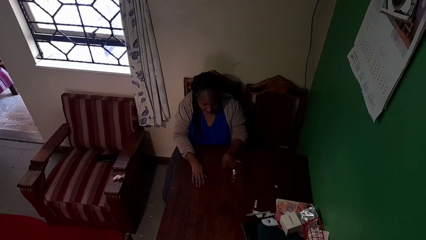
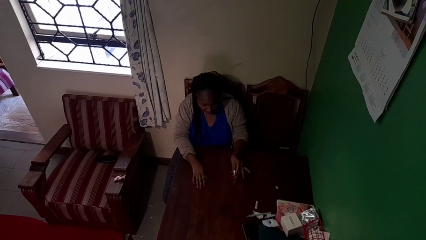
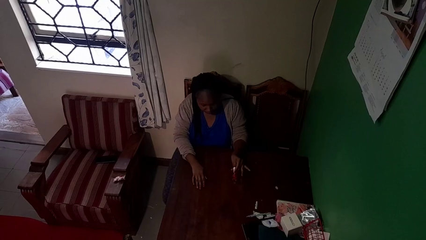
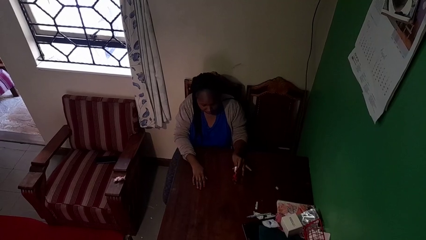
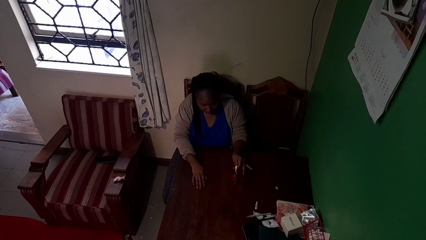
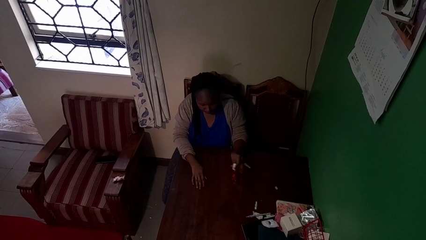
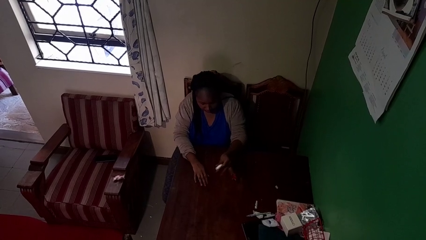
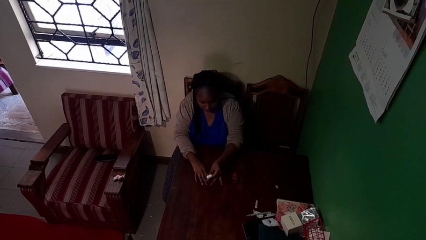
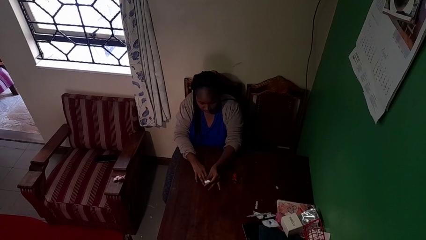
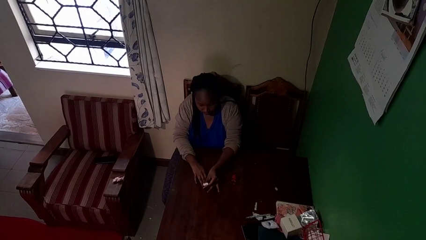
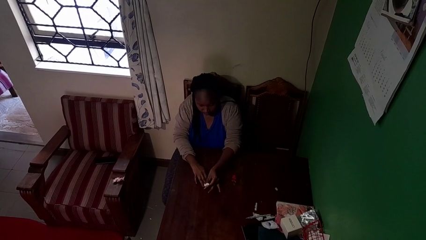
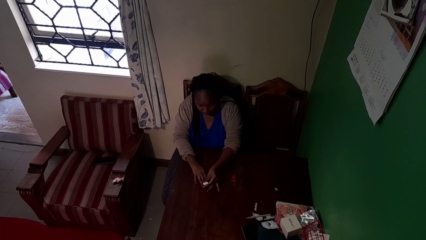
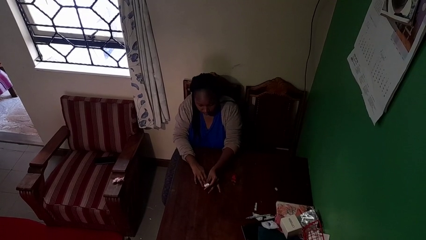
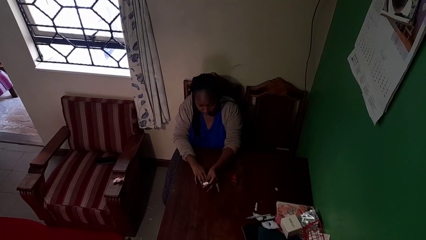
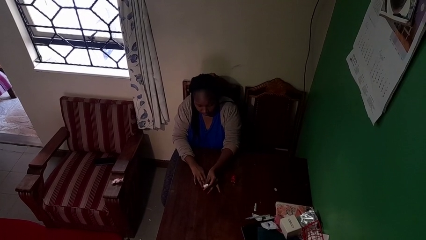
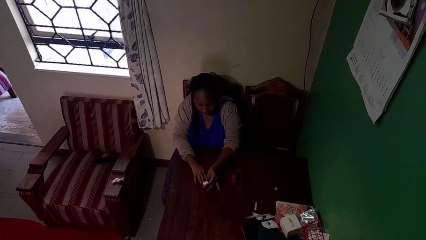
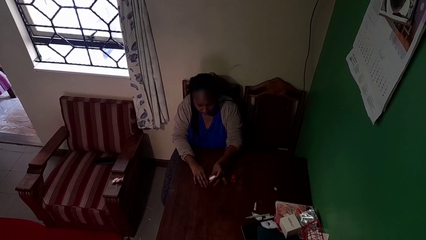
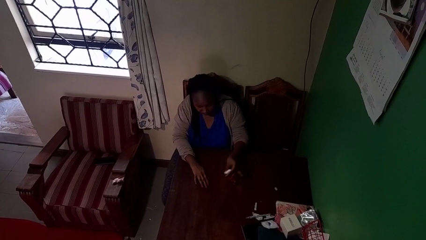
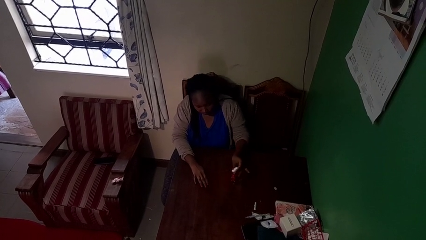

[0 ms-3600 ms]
person paints fingernails

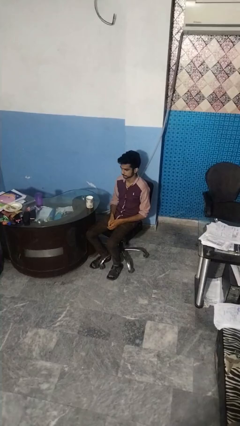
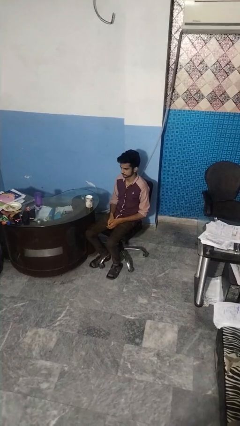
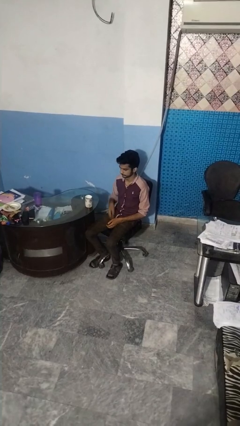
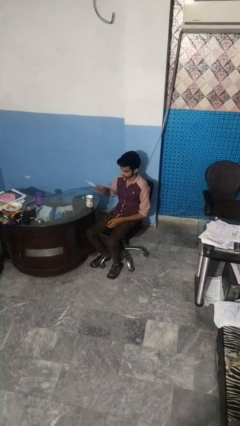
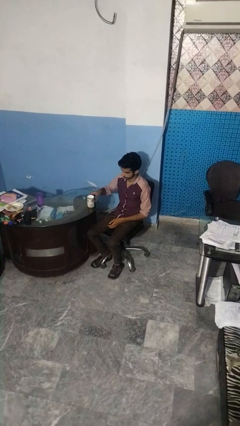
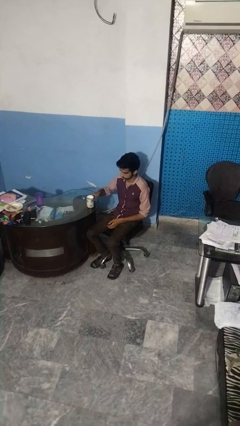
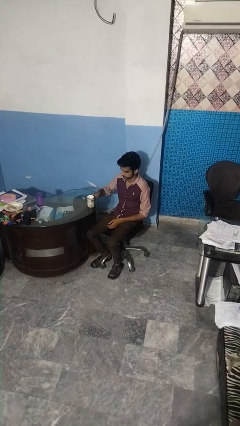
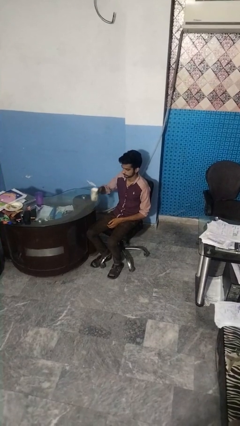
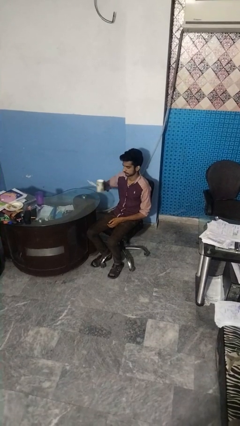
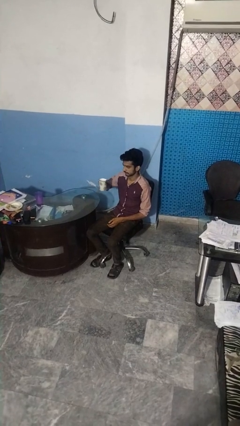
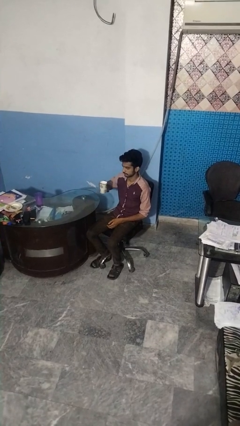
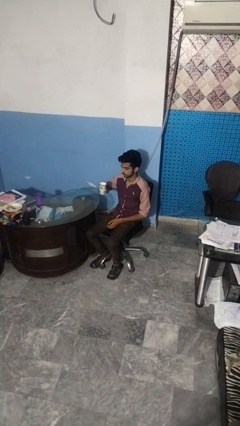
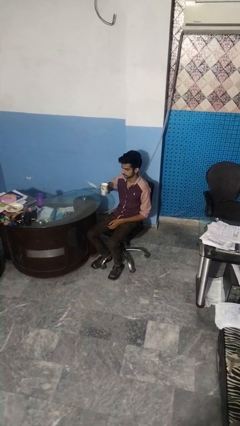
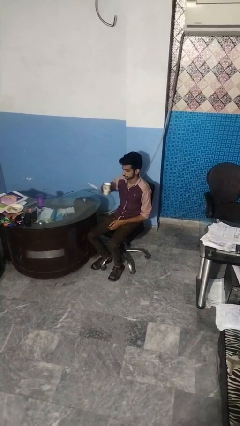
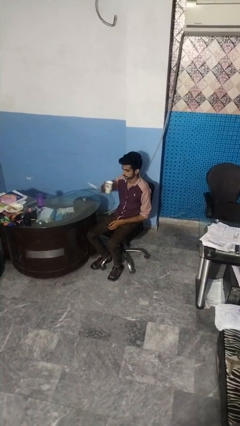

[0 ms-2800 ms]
person picks up object from table

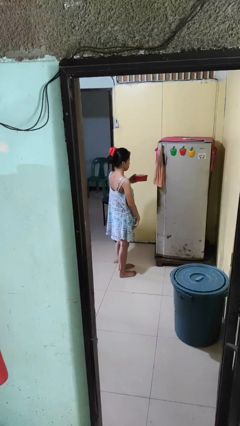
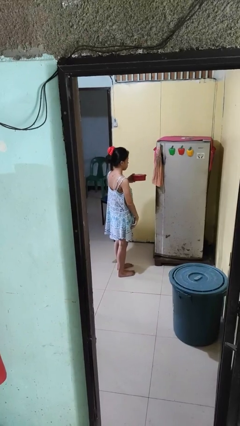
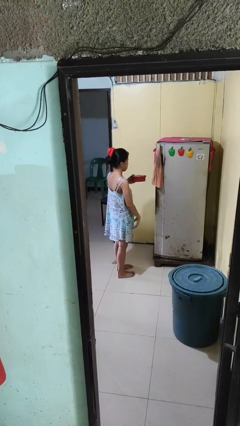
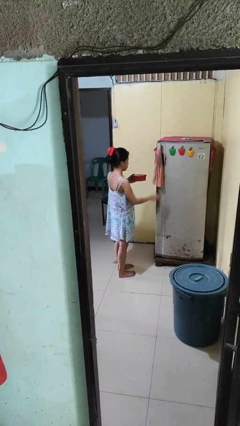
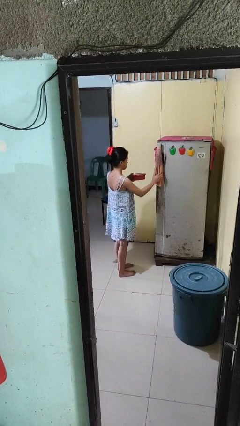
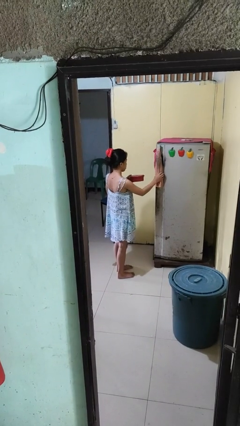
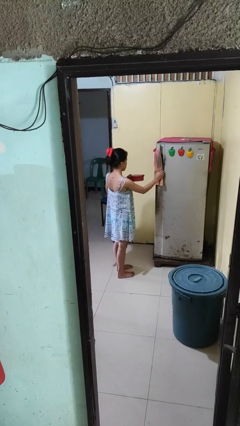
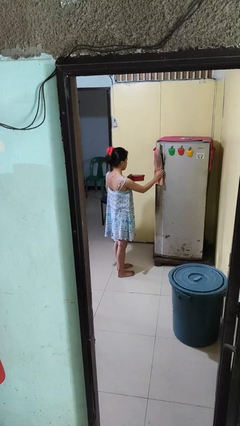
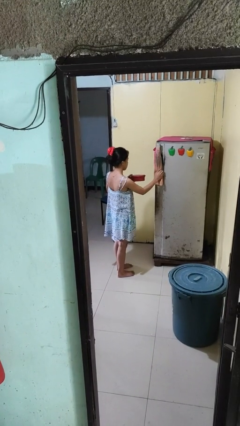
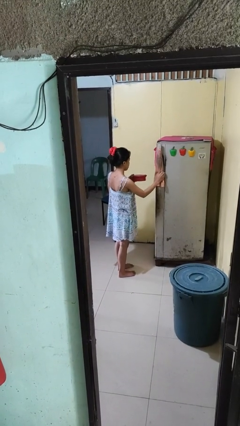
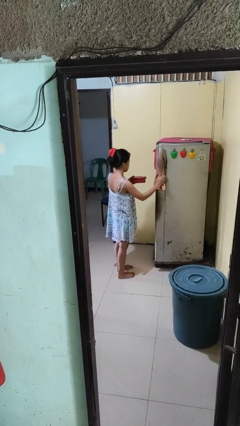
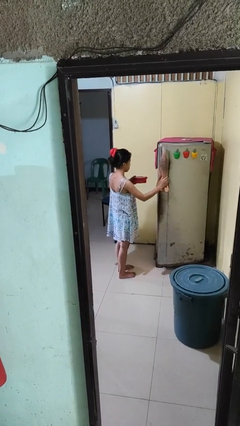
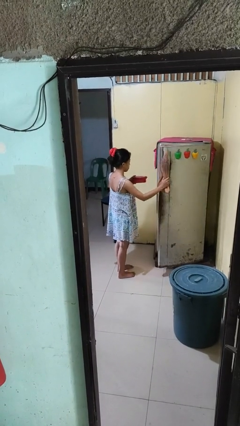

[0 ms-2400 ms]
person opens refrigerator

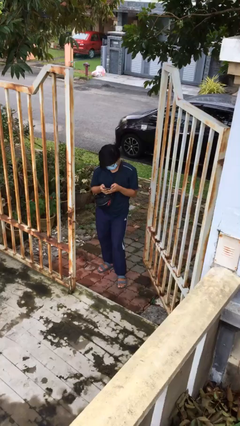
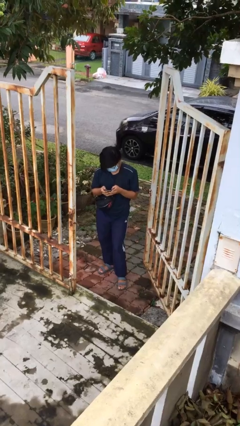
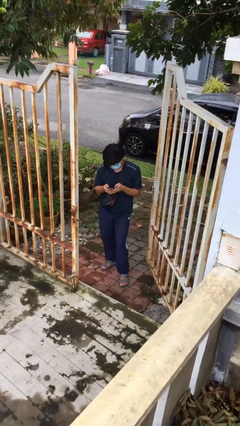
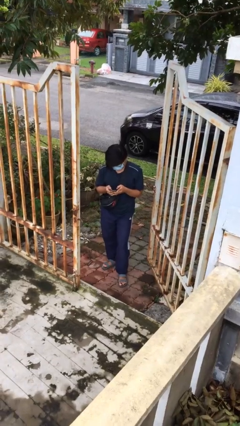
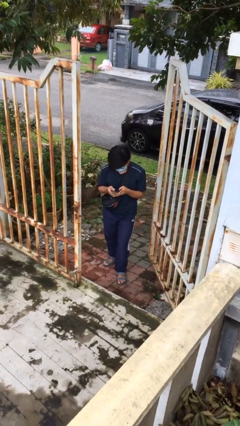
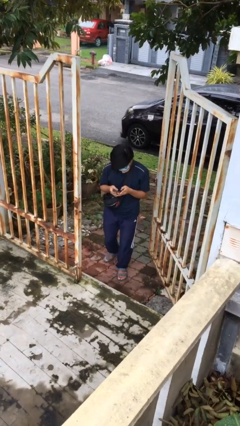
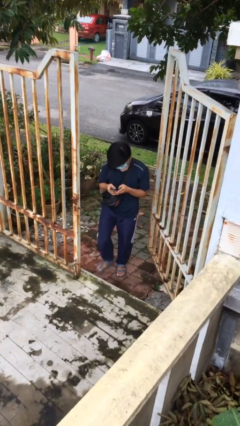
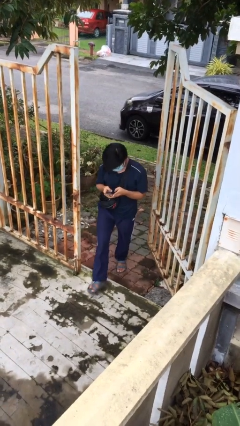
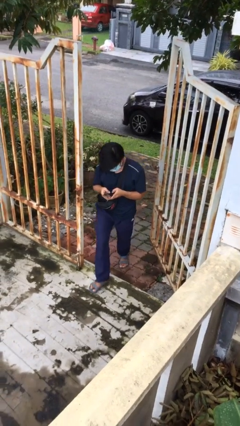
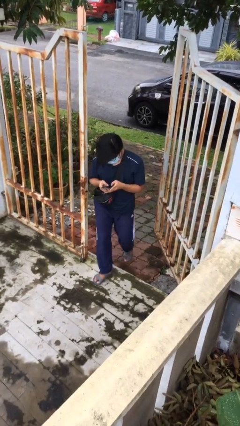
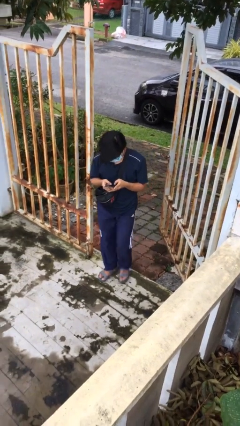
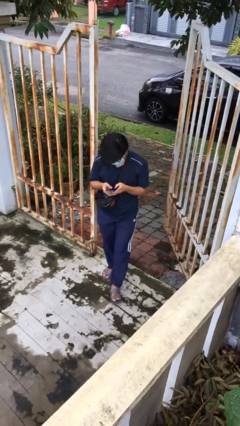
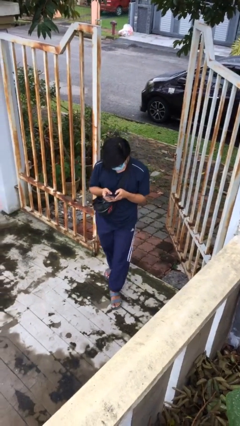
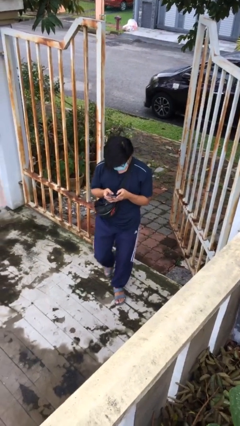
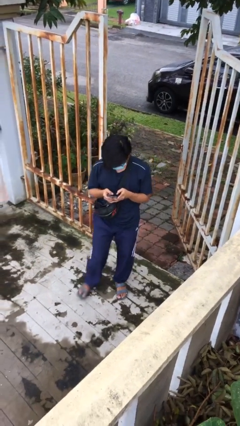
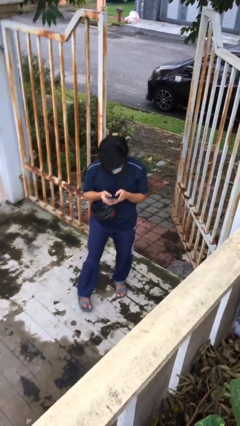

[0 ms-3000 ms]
person enters scene through structure

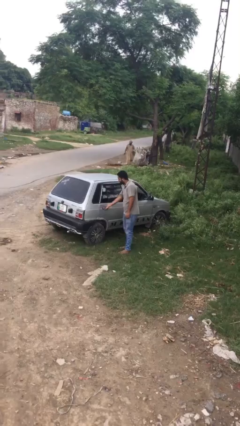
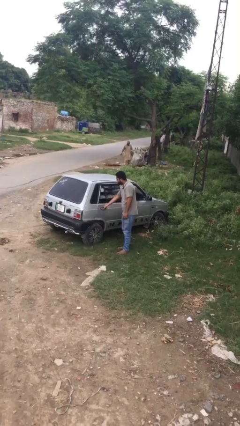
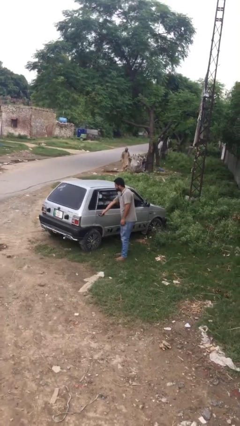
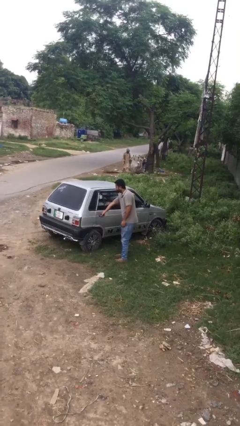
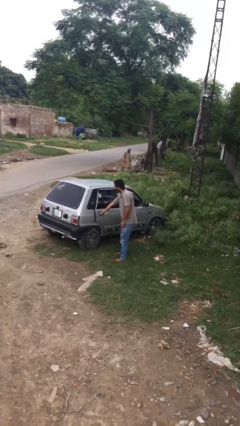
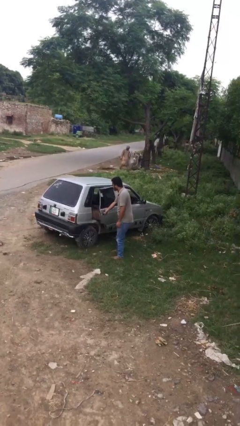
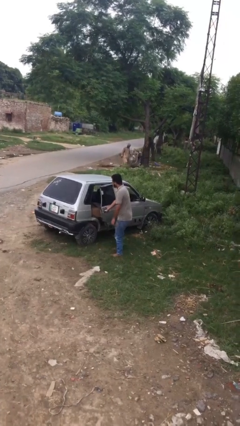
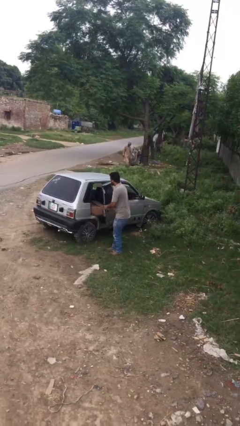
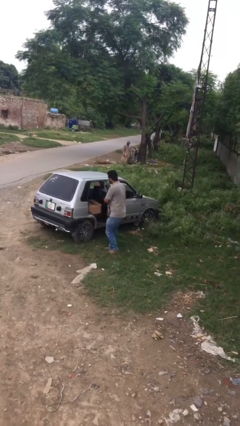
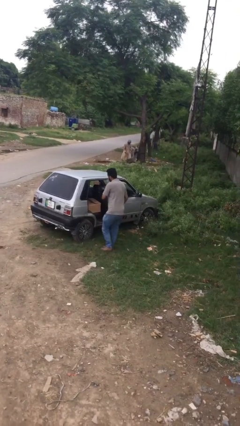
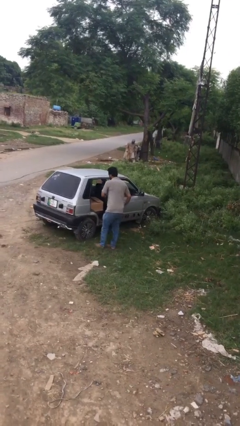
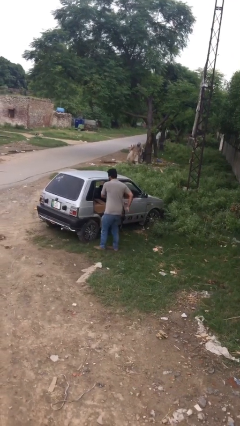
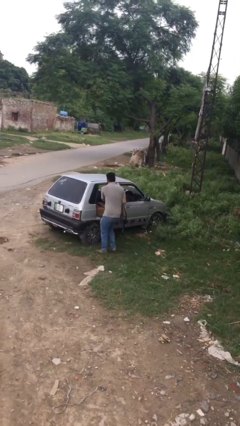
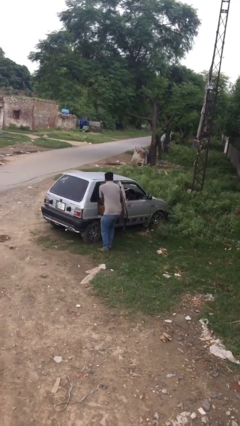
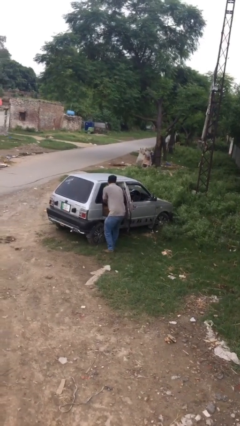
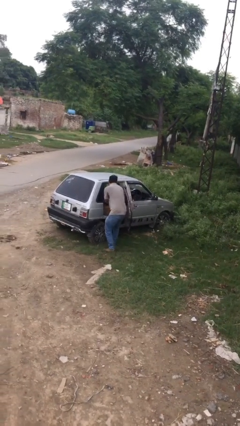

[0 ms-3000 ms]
person opens car door

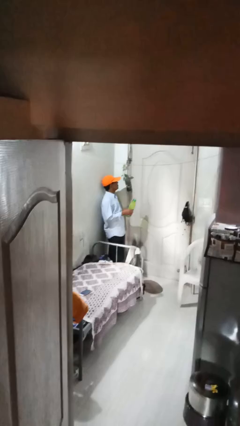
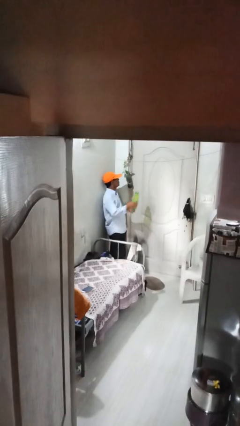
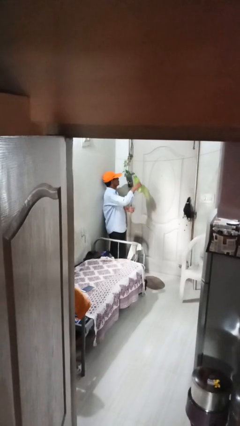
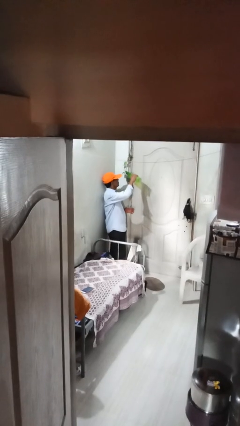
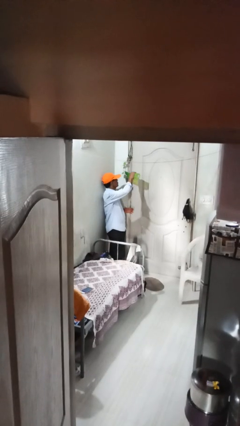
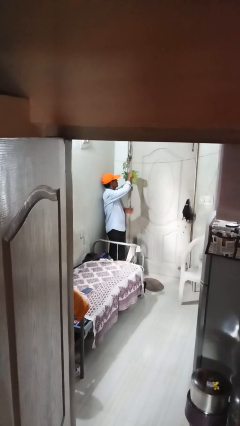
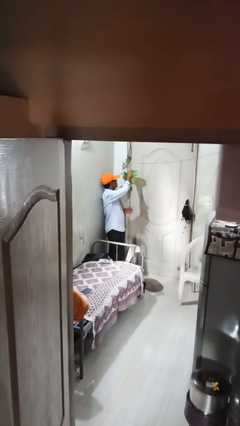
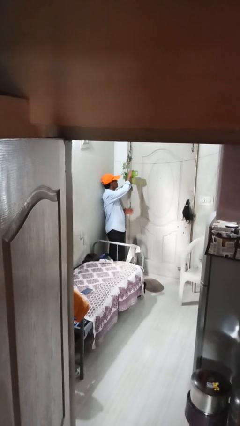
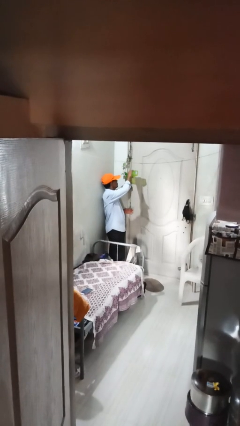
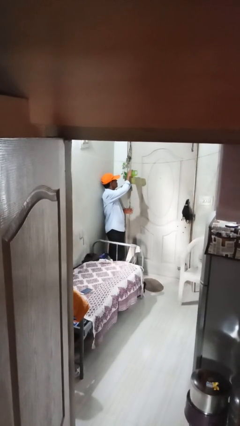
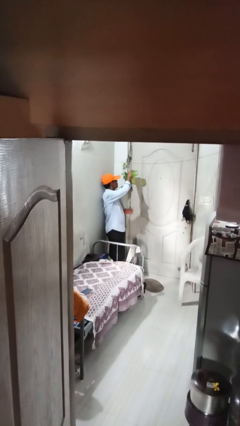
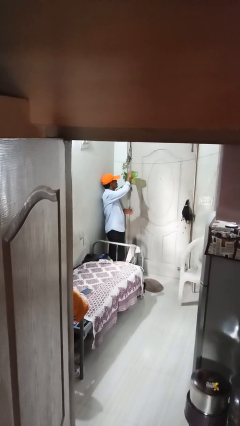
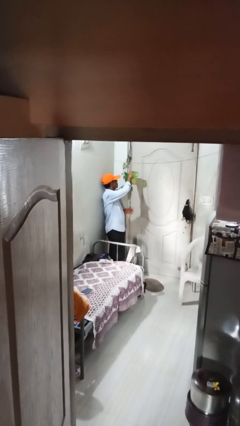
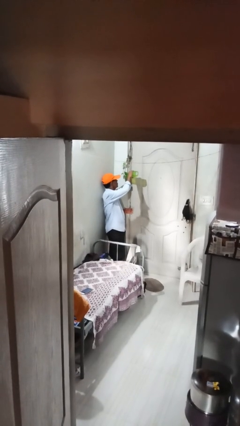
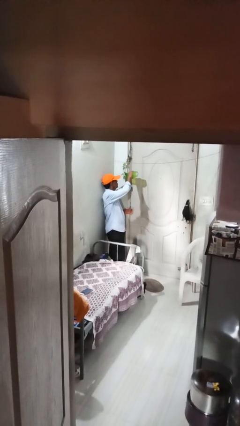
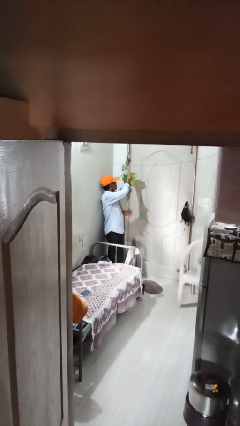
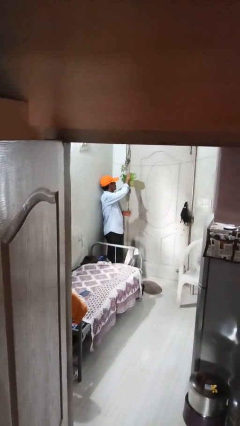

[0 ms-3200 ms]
person waters houseplant
